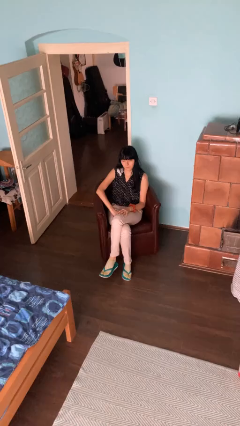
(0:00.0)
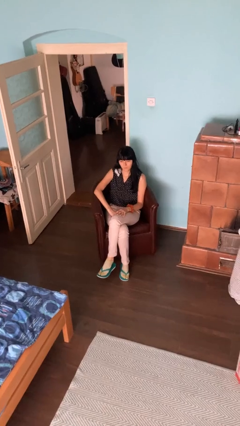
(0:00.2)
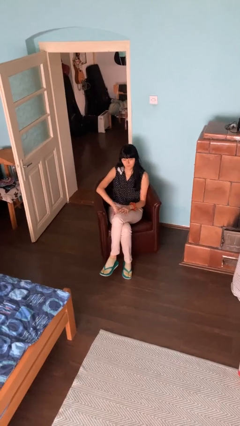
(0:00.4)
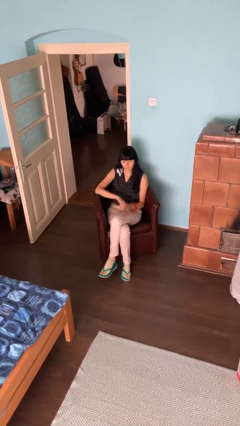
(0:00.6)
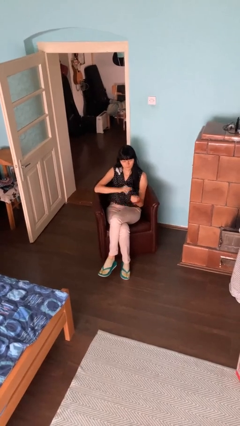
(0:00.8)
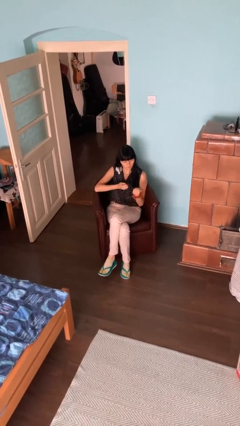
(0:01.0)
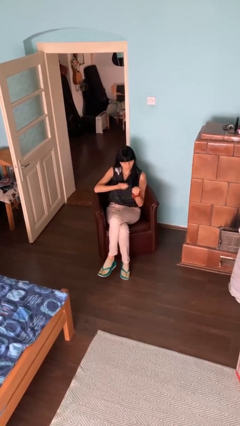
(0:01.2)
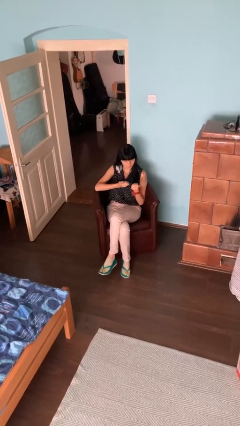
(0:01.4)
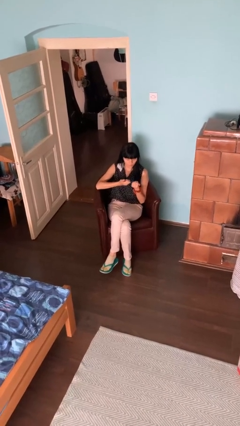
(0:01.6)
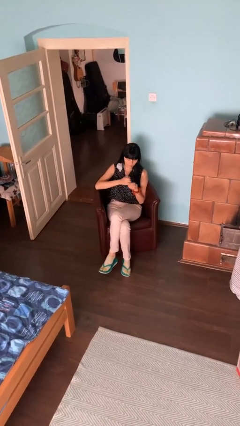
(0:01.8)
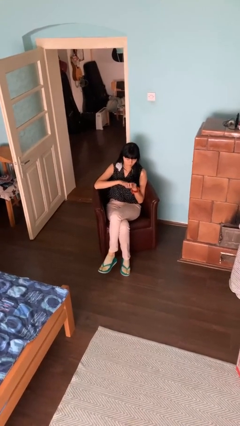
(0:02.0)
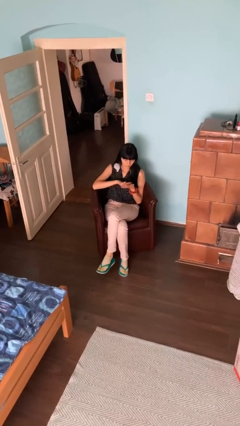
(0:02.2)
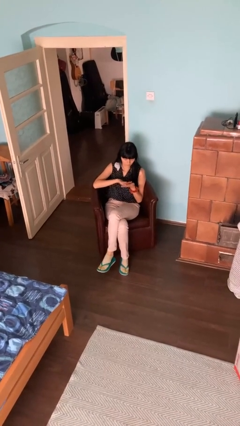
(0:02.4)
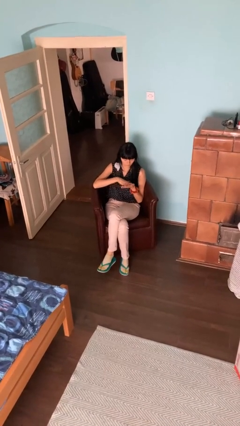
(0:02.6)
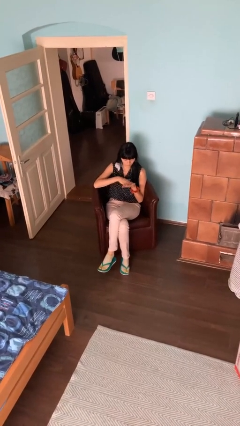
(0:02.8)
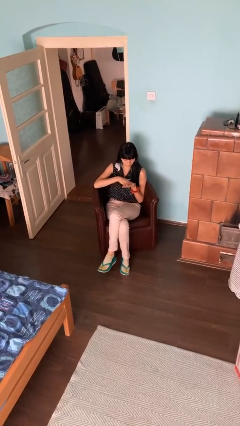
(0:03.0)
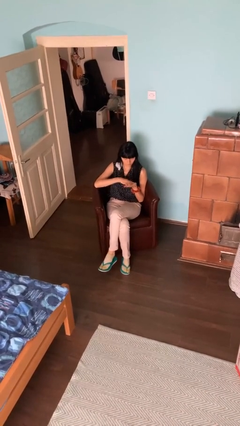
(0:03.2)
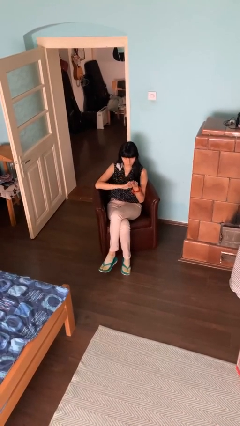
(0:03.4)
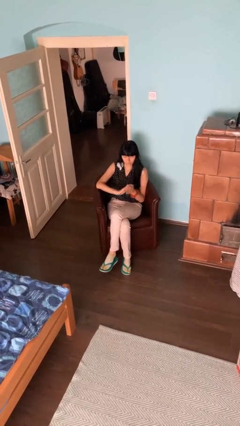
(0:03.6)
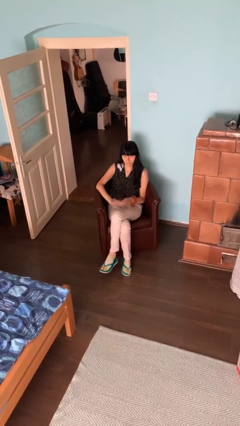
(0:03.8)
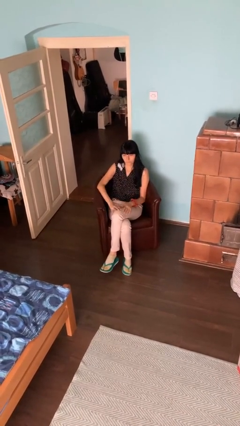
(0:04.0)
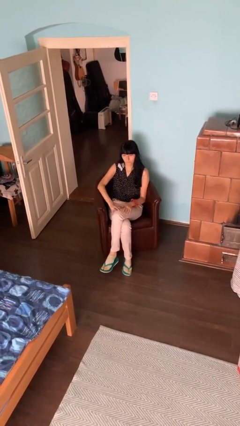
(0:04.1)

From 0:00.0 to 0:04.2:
person looks at hands in lap

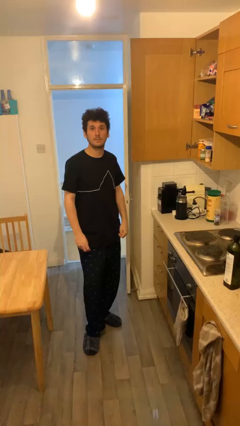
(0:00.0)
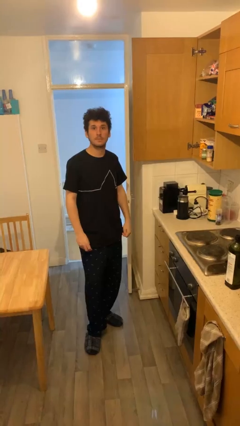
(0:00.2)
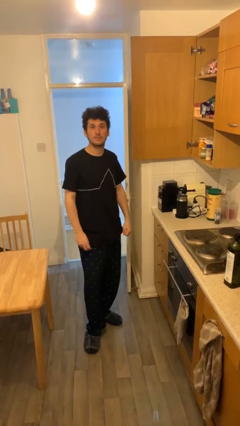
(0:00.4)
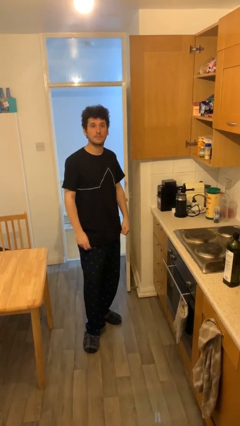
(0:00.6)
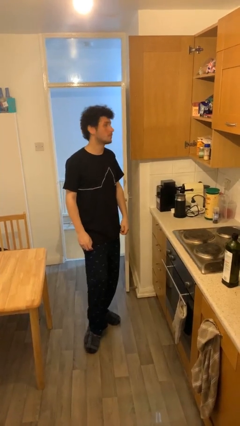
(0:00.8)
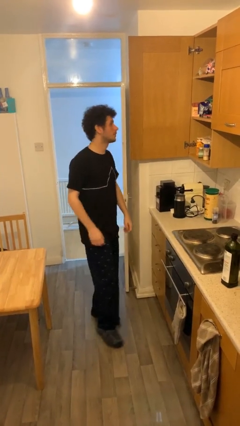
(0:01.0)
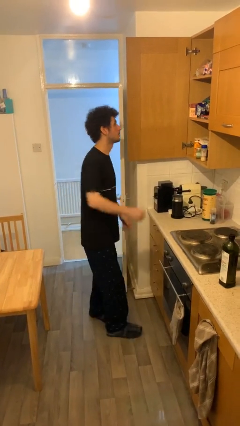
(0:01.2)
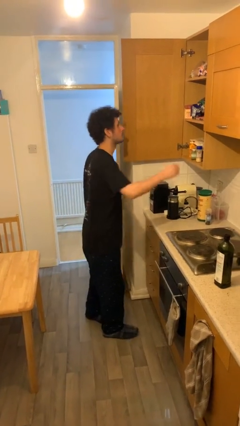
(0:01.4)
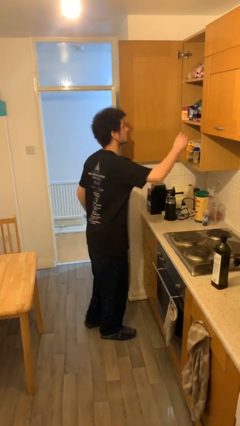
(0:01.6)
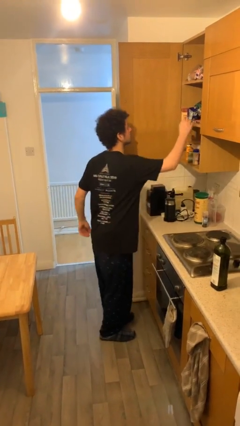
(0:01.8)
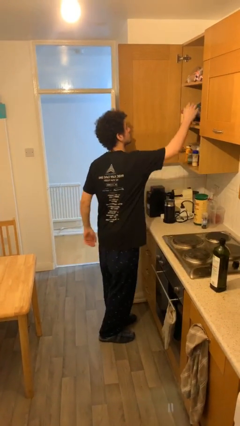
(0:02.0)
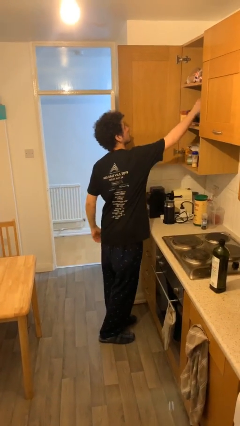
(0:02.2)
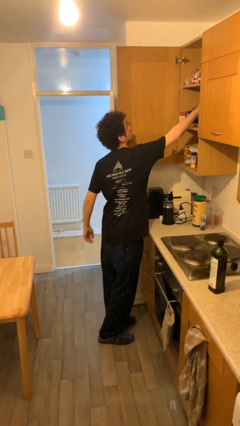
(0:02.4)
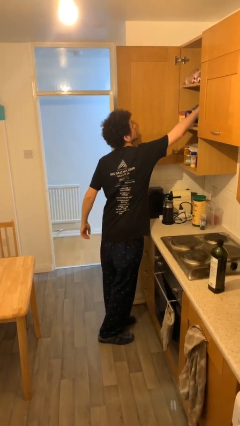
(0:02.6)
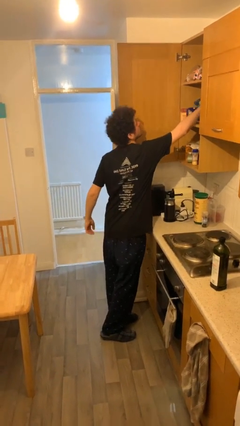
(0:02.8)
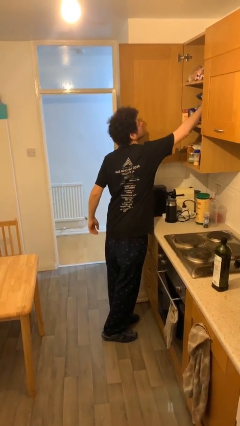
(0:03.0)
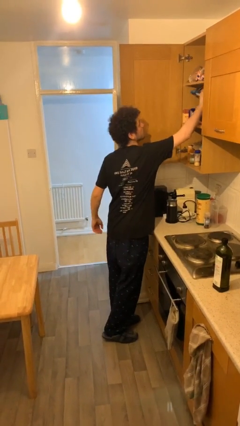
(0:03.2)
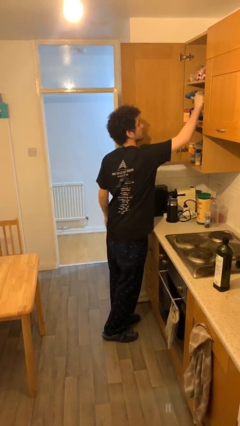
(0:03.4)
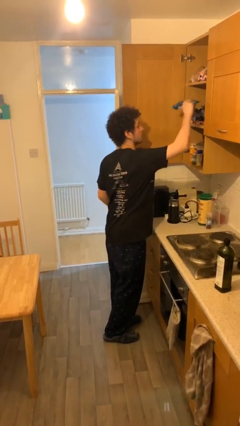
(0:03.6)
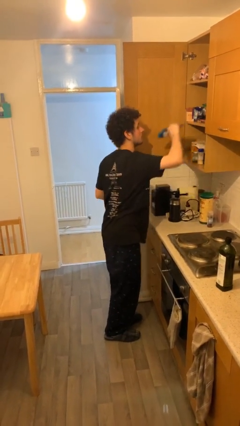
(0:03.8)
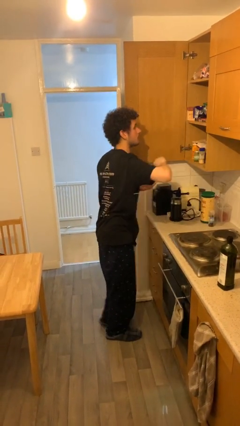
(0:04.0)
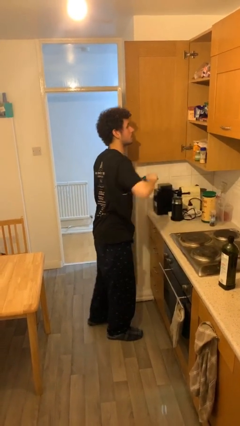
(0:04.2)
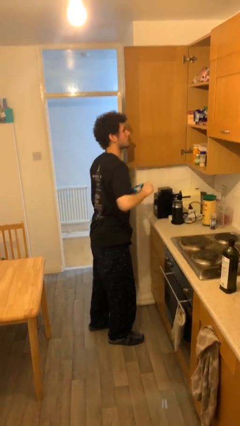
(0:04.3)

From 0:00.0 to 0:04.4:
person picks up object from shelf

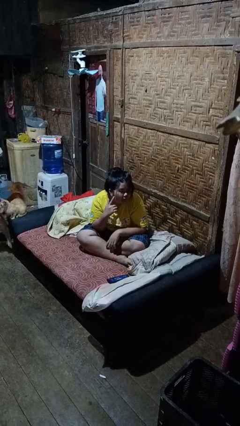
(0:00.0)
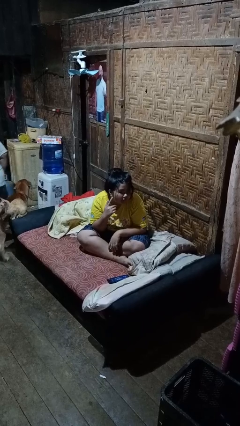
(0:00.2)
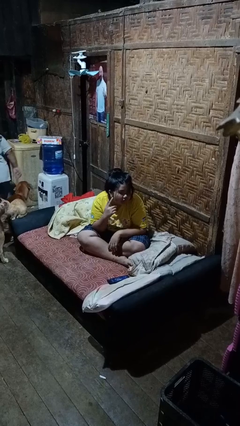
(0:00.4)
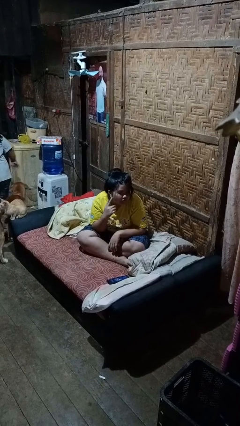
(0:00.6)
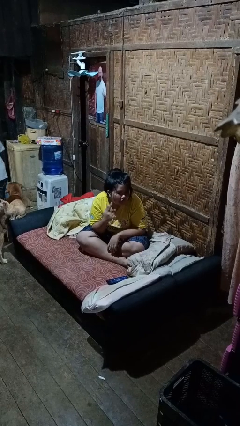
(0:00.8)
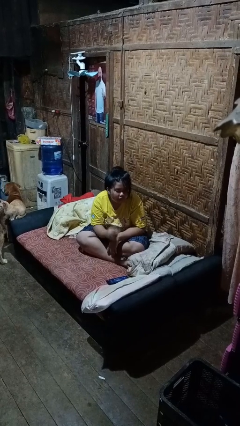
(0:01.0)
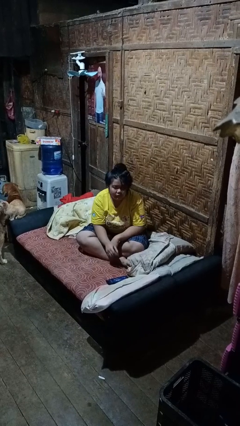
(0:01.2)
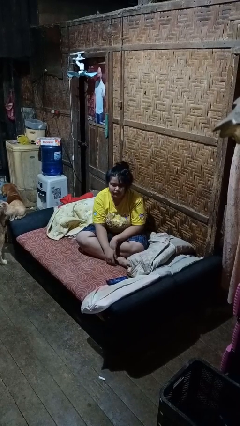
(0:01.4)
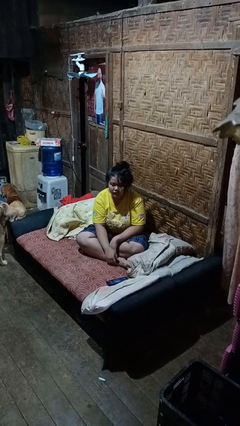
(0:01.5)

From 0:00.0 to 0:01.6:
person gestures listen closely

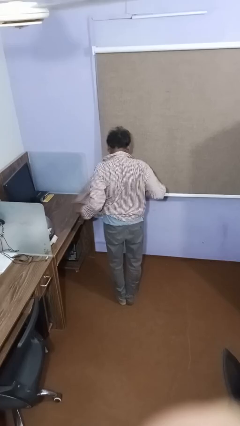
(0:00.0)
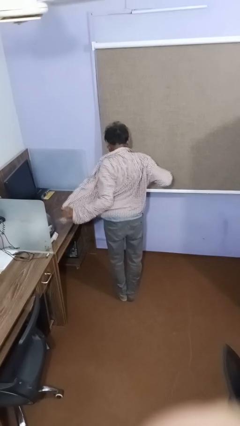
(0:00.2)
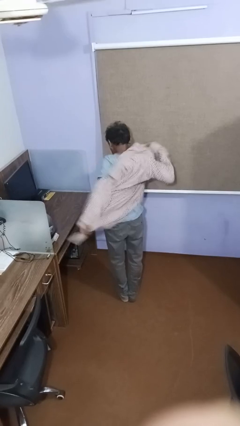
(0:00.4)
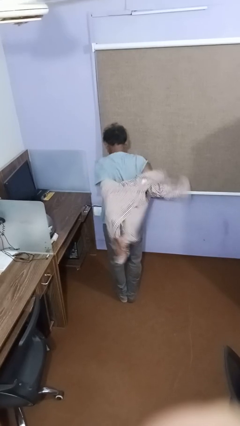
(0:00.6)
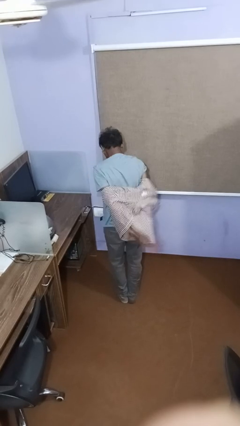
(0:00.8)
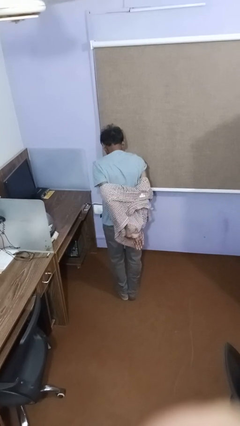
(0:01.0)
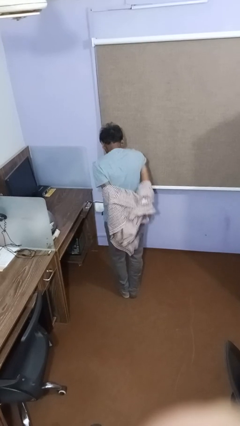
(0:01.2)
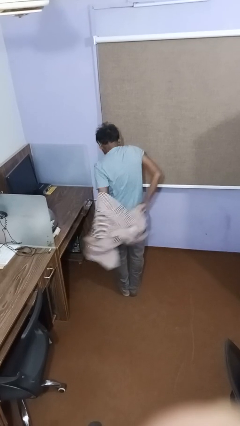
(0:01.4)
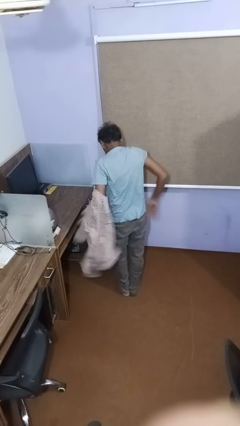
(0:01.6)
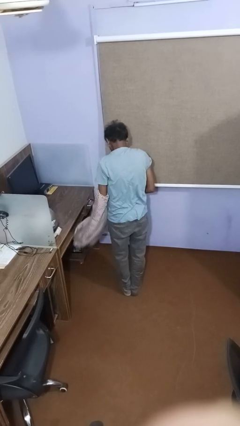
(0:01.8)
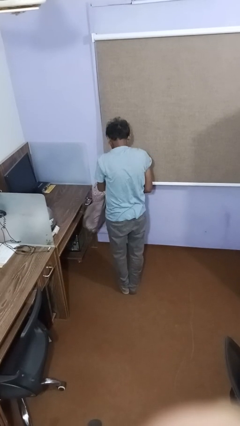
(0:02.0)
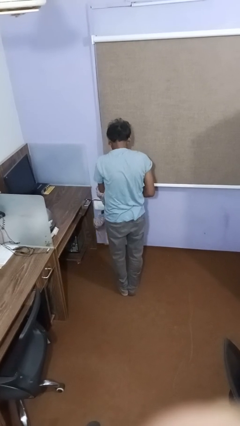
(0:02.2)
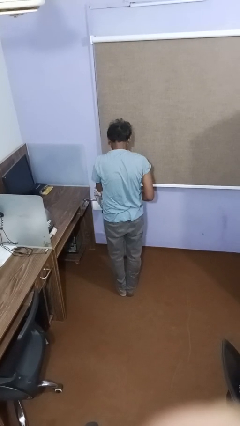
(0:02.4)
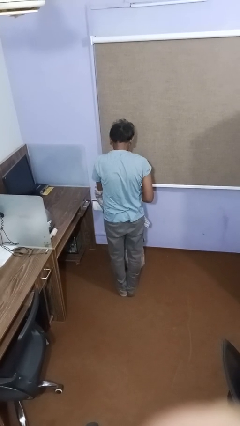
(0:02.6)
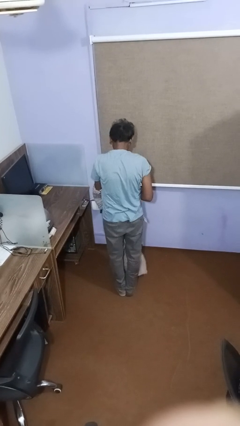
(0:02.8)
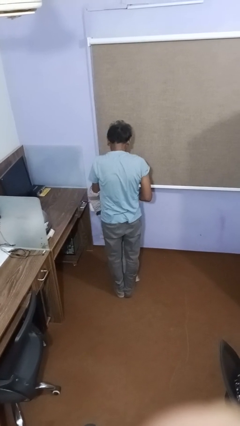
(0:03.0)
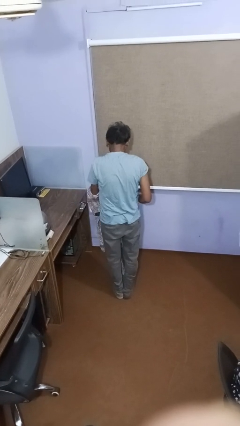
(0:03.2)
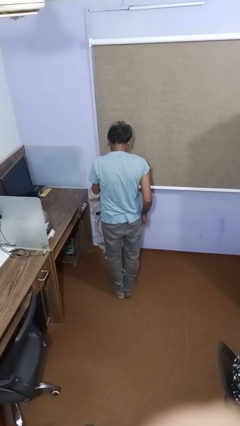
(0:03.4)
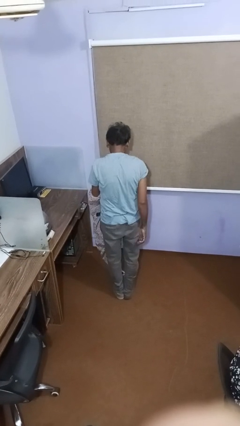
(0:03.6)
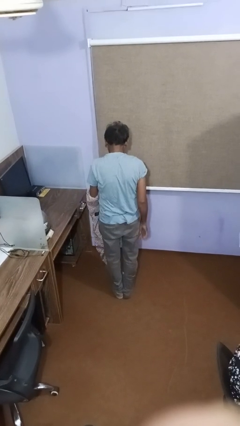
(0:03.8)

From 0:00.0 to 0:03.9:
person takes off shirt

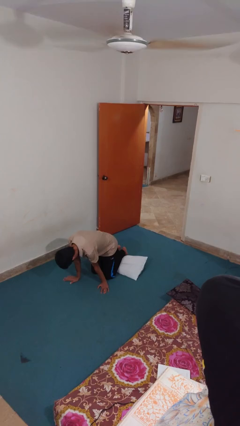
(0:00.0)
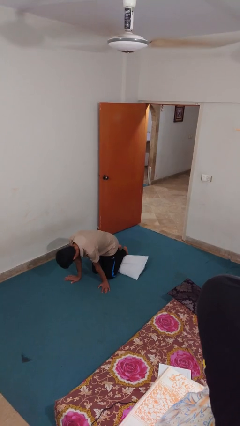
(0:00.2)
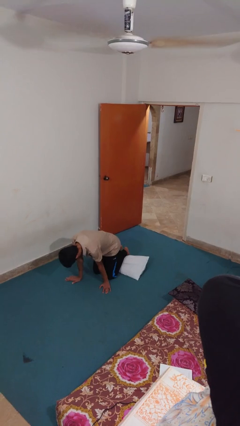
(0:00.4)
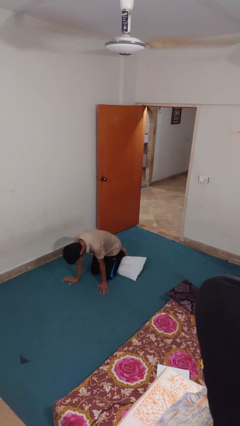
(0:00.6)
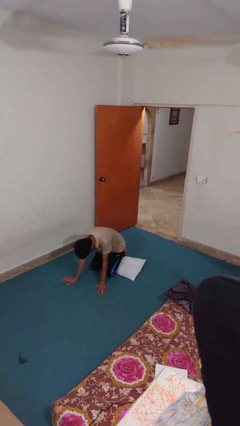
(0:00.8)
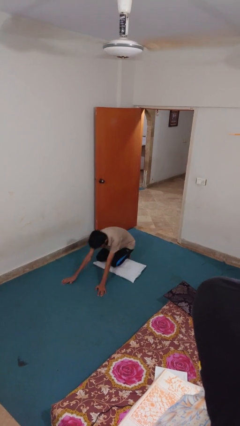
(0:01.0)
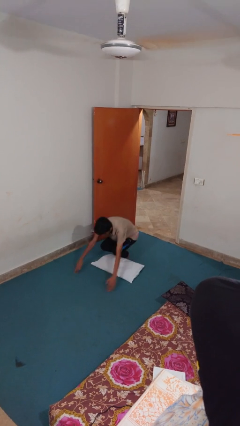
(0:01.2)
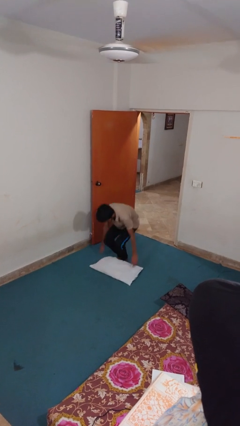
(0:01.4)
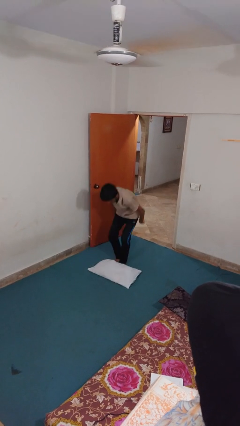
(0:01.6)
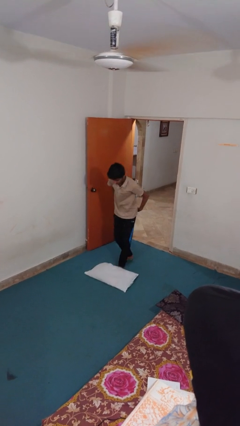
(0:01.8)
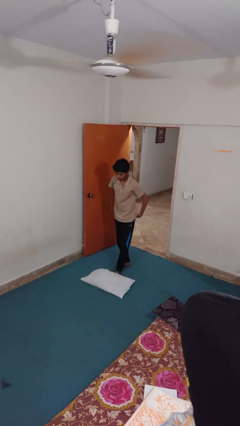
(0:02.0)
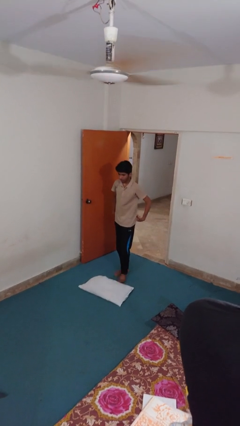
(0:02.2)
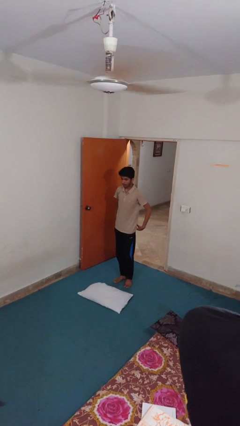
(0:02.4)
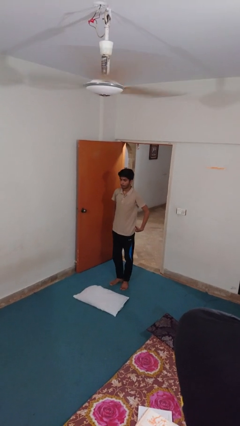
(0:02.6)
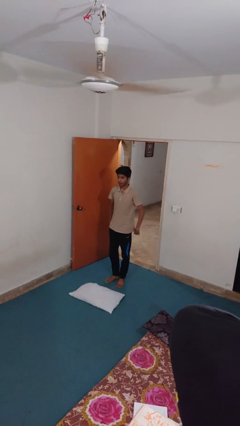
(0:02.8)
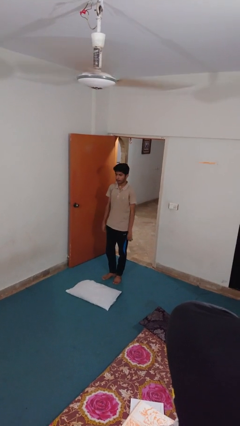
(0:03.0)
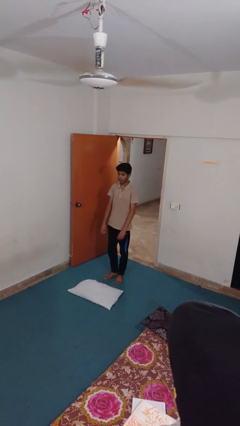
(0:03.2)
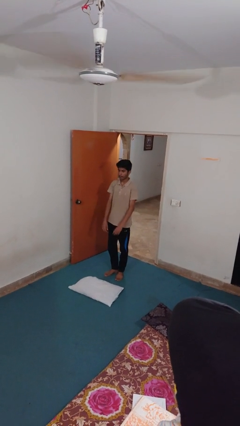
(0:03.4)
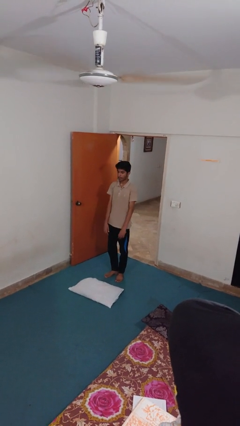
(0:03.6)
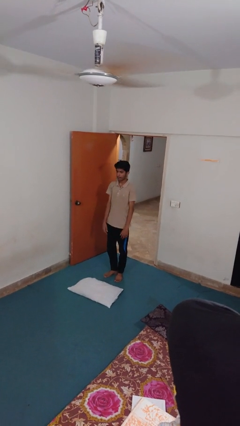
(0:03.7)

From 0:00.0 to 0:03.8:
person stands up from floor
